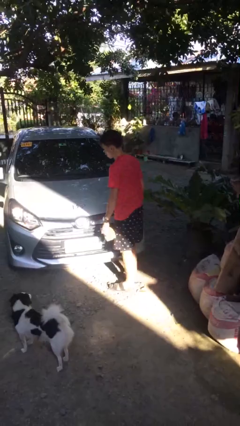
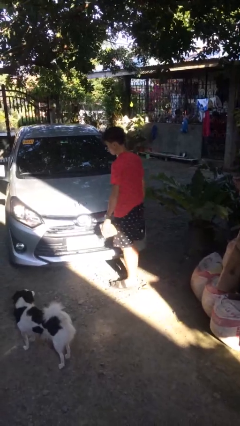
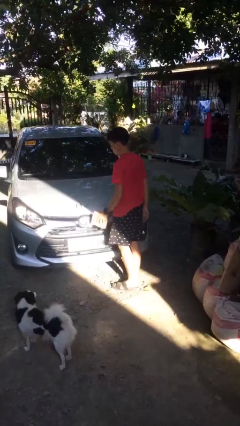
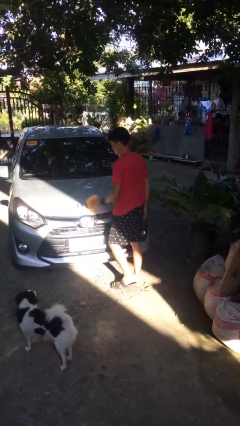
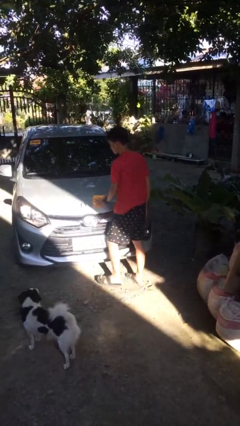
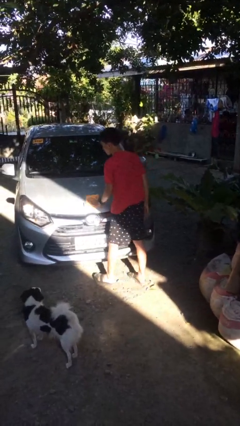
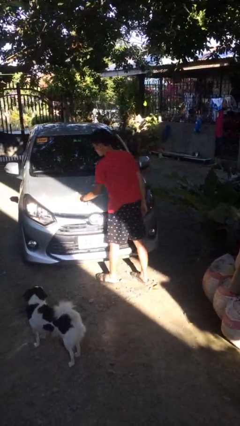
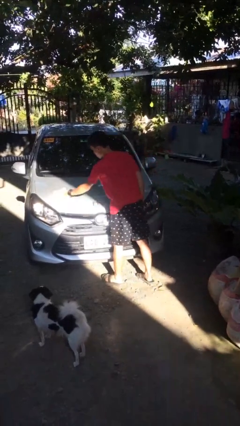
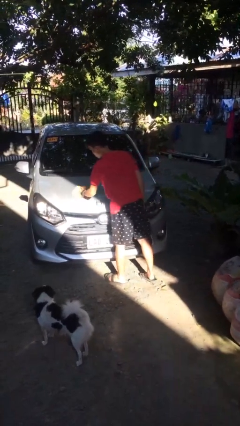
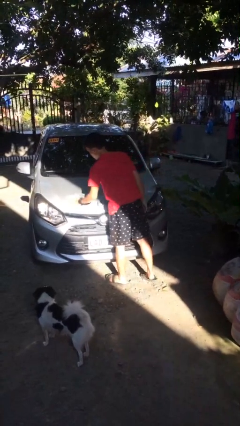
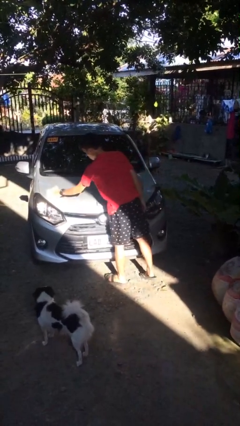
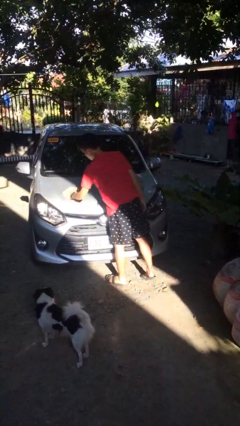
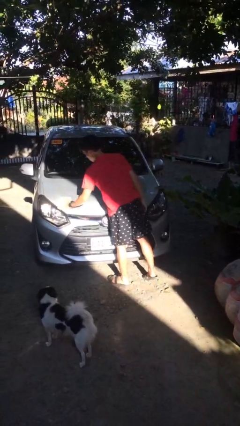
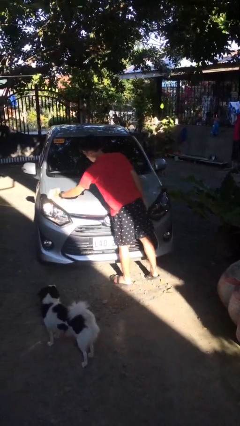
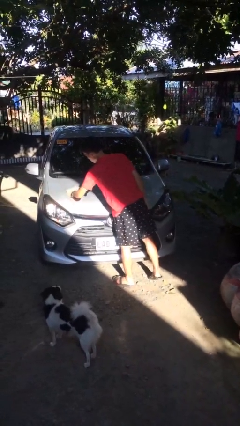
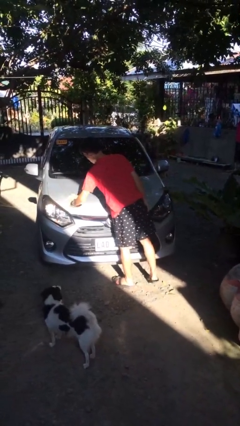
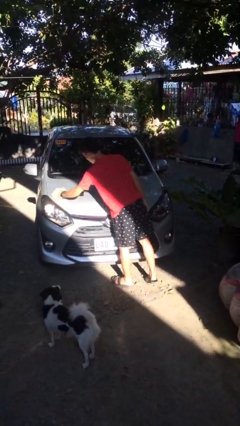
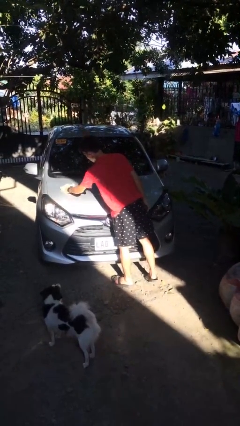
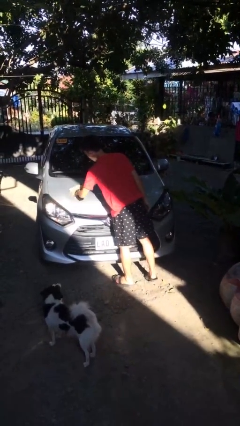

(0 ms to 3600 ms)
person polishes car with rag

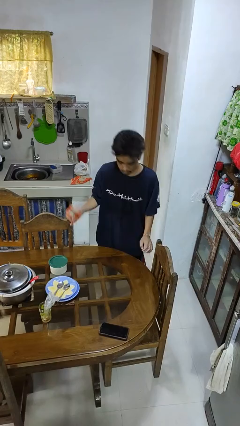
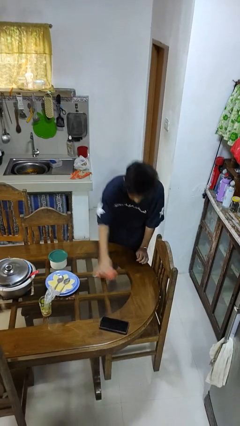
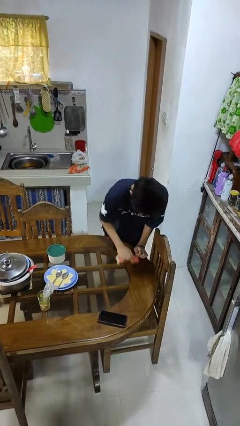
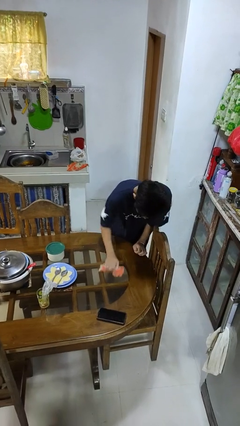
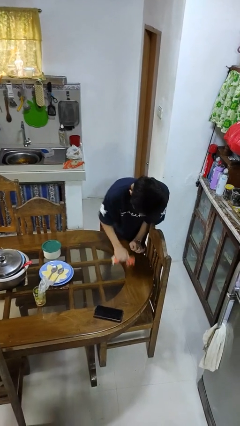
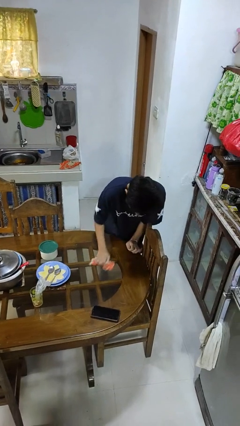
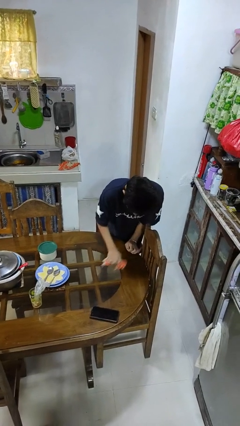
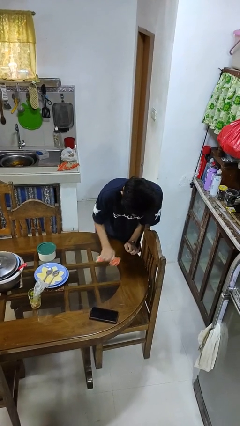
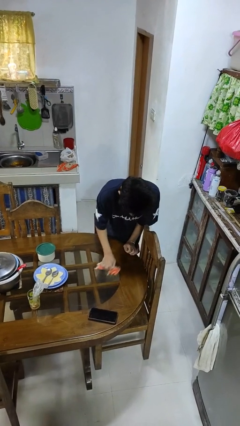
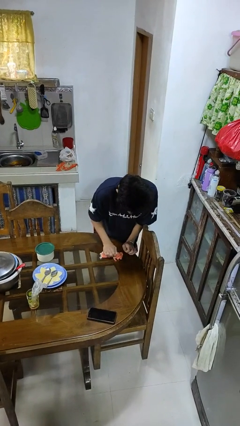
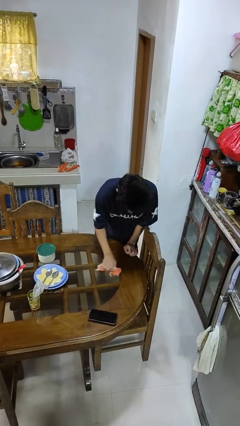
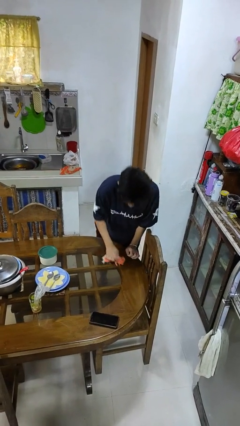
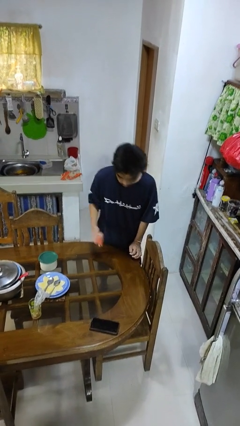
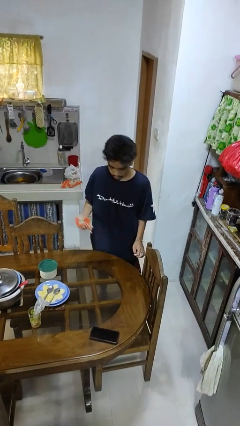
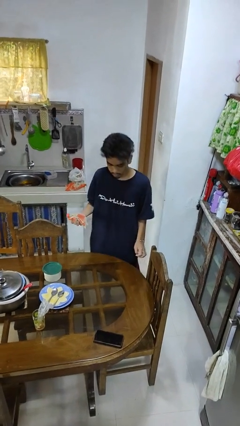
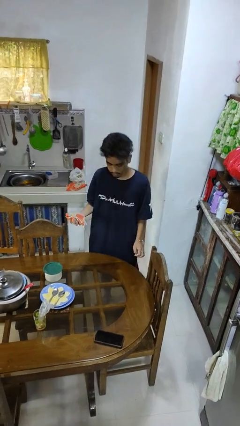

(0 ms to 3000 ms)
person cleans table with rag

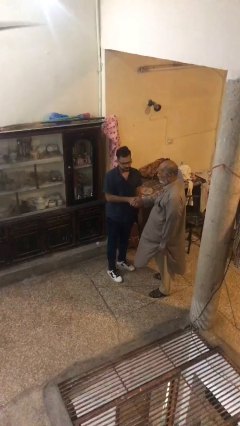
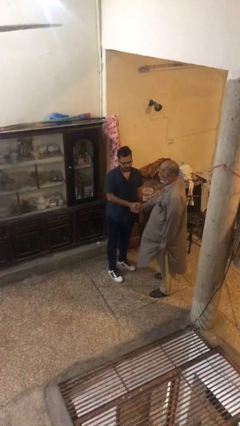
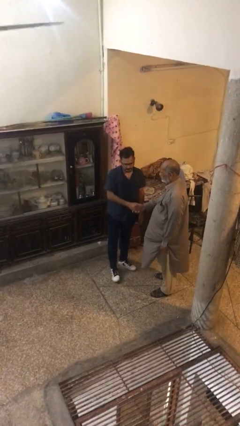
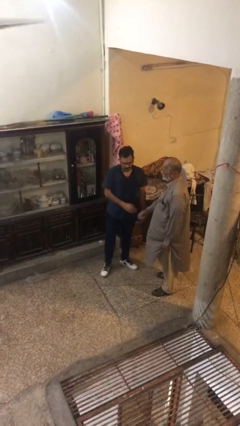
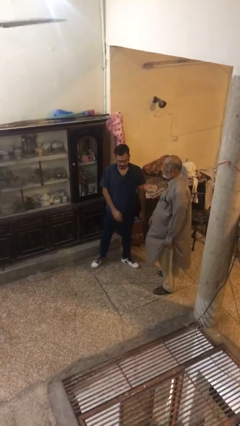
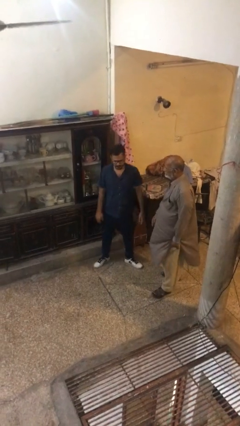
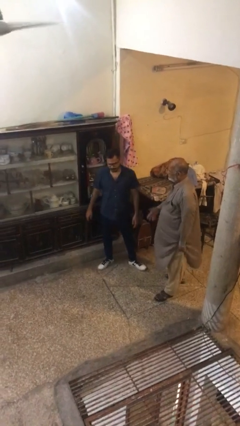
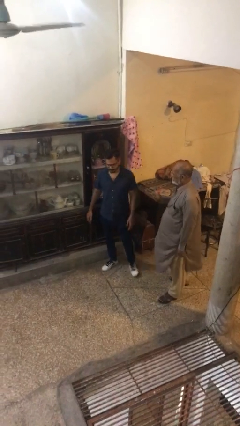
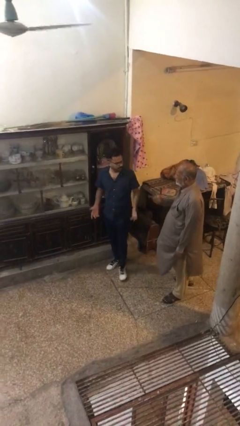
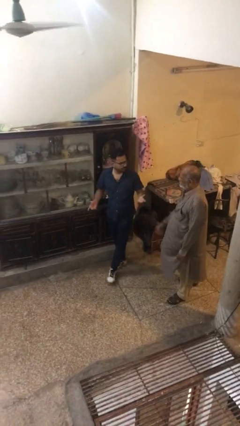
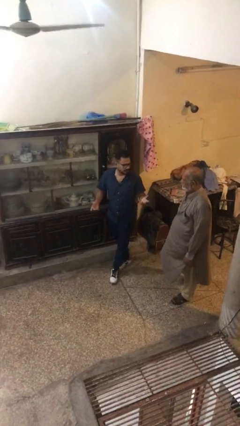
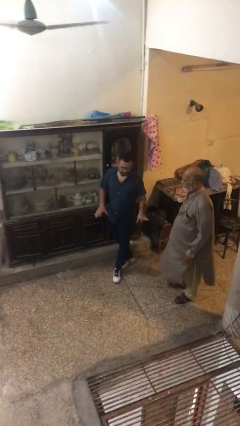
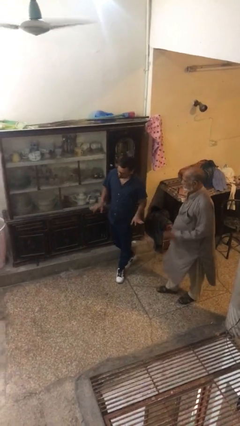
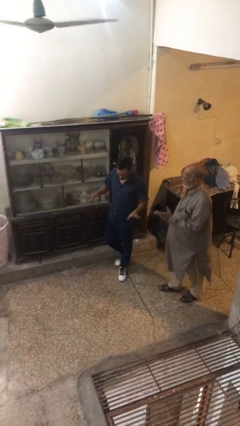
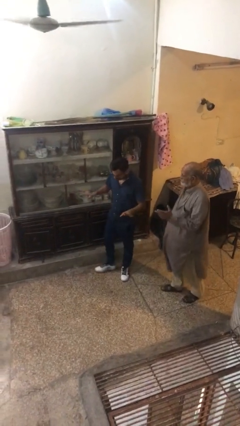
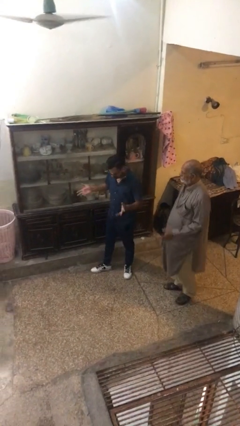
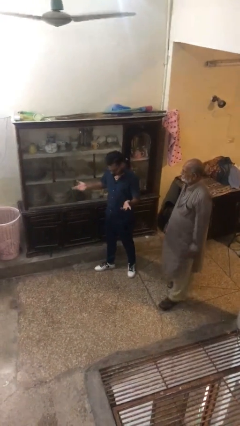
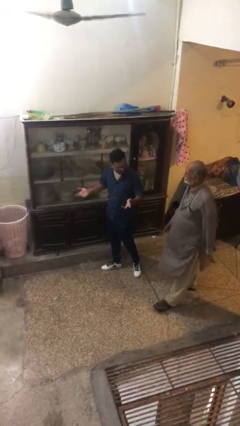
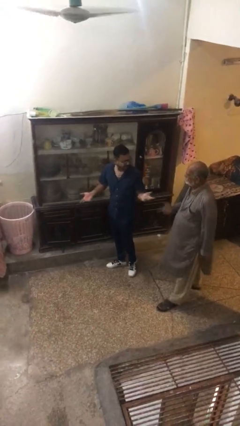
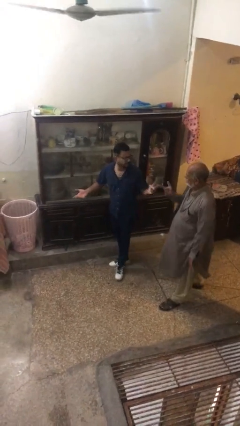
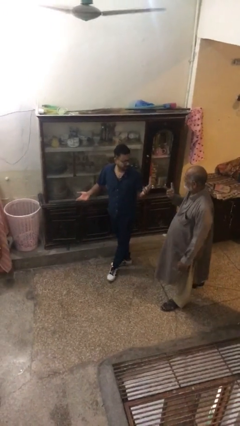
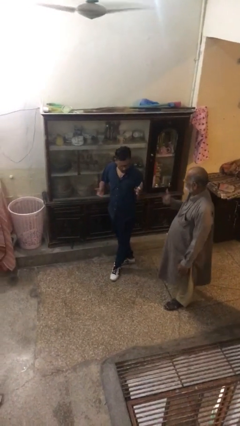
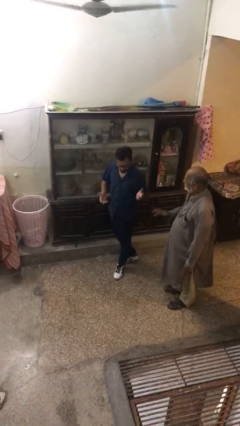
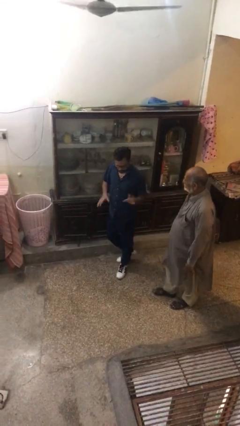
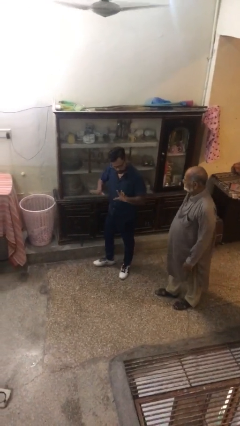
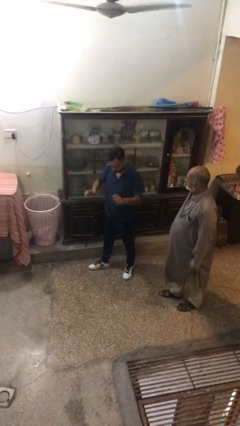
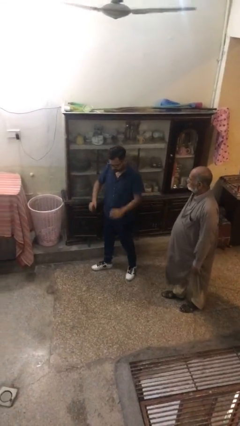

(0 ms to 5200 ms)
person talks to person

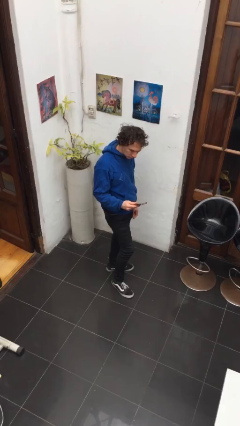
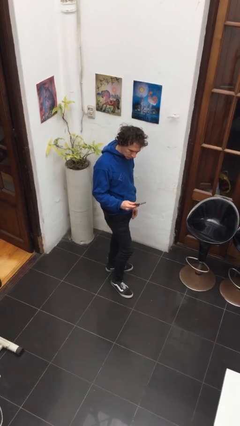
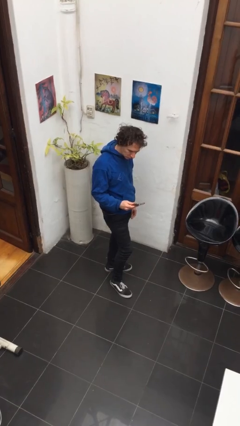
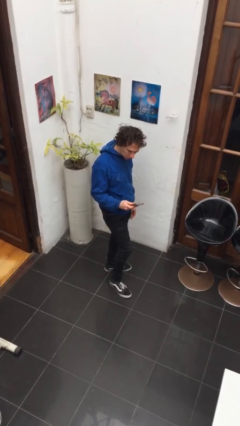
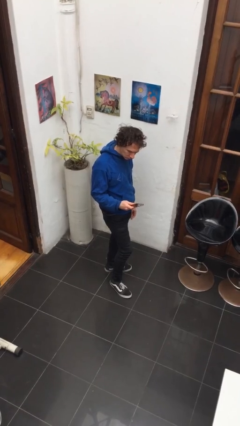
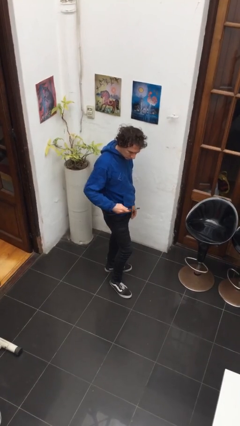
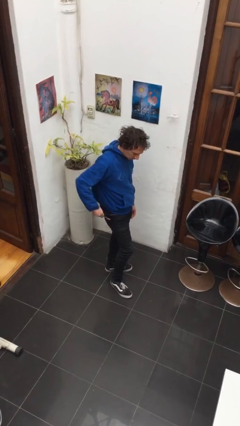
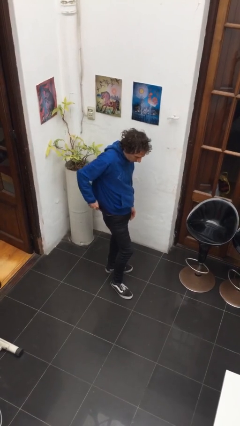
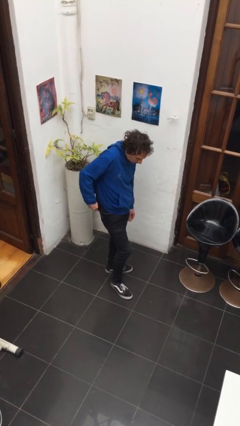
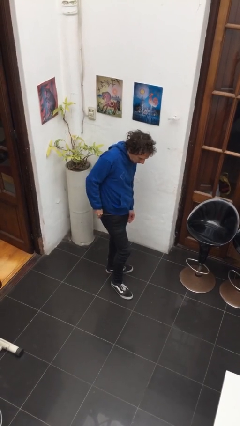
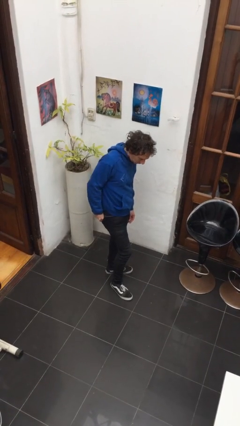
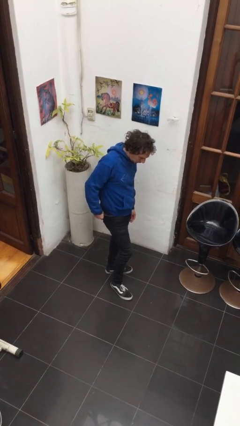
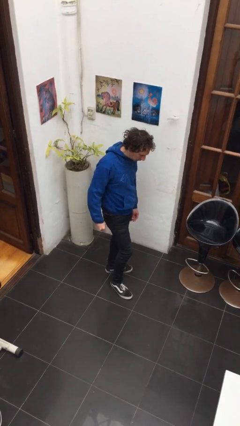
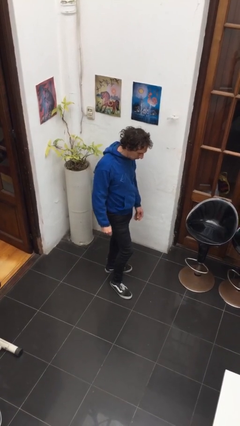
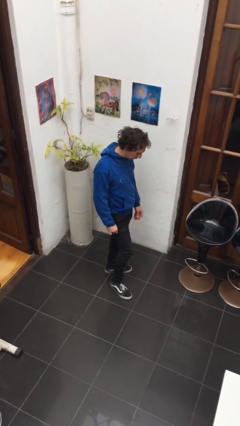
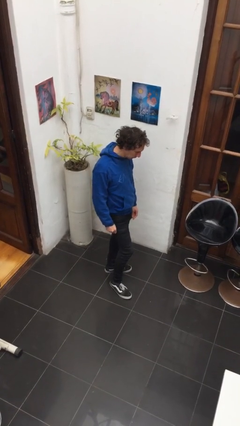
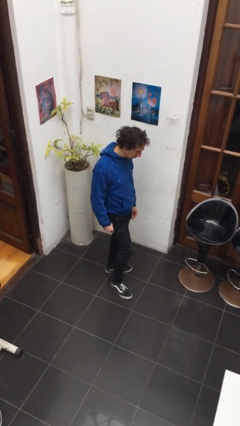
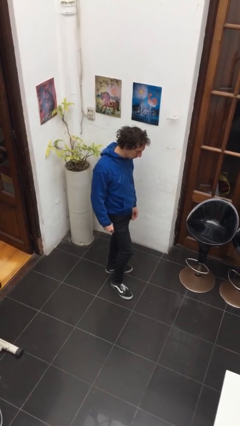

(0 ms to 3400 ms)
person puts phone into pocket

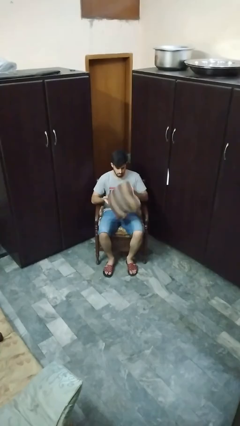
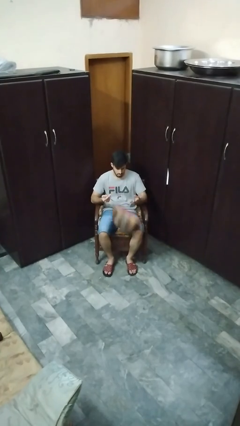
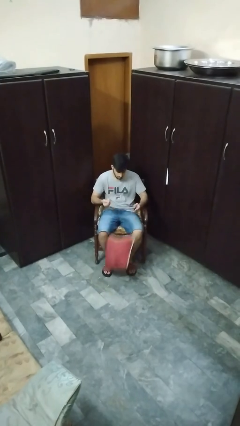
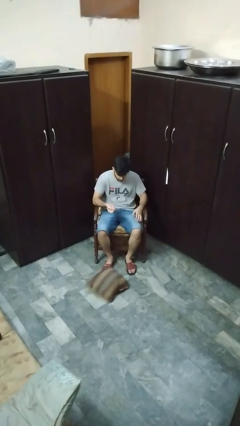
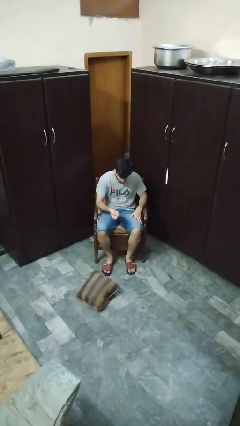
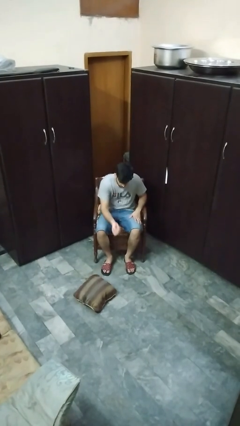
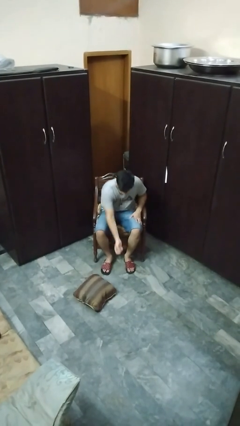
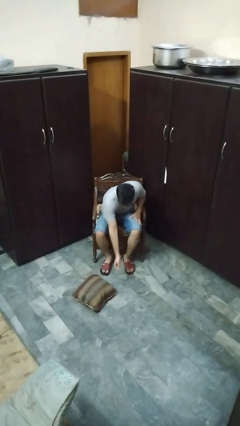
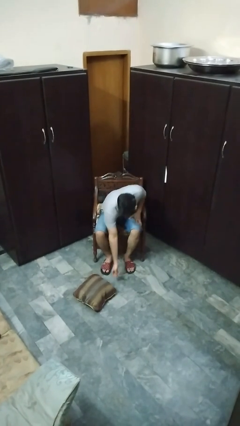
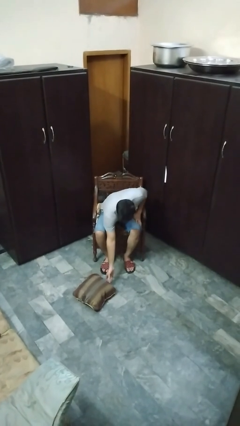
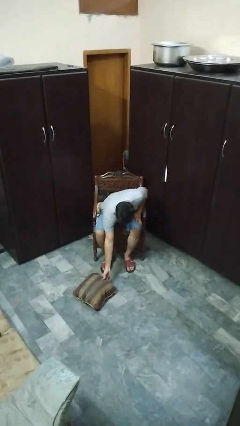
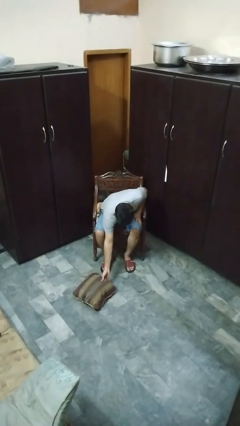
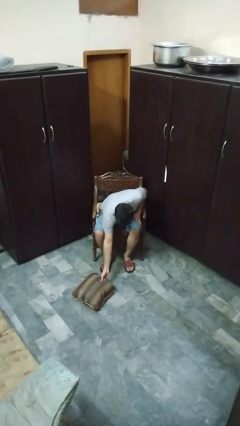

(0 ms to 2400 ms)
person drops object

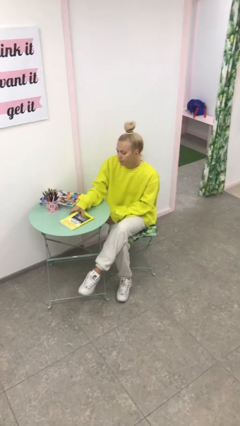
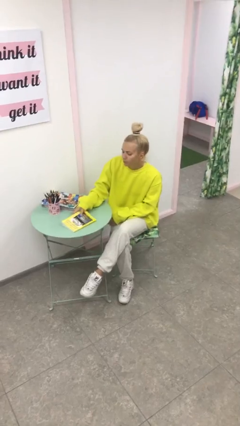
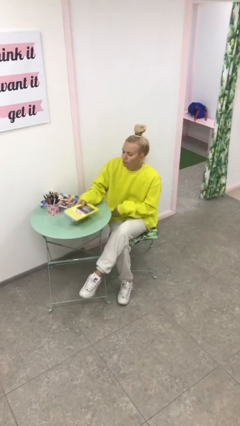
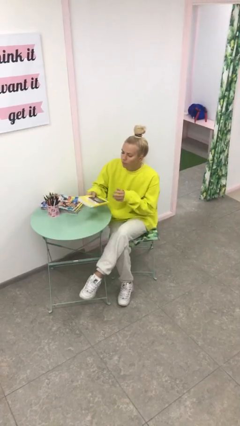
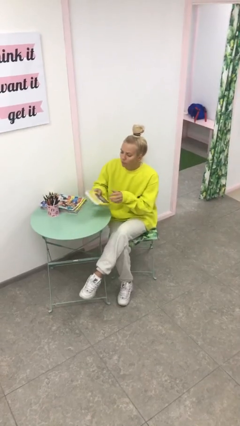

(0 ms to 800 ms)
person picks up object from table
